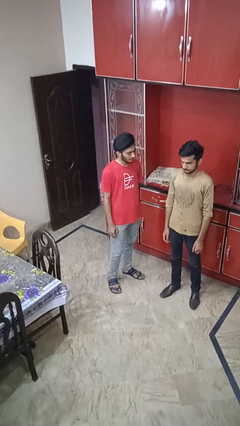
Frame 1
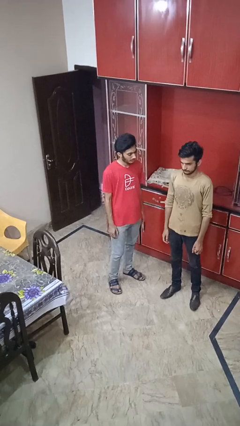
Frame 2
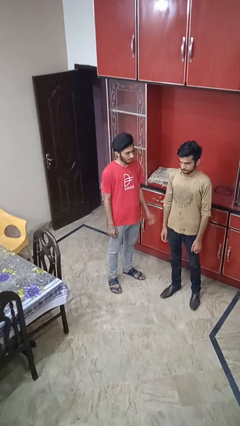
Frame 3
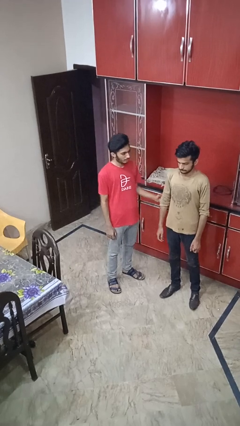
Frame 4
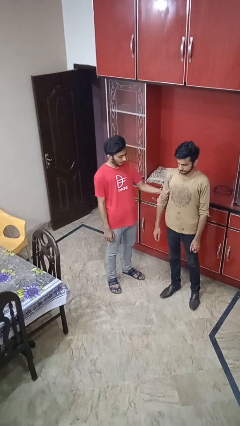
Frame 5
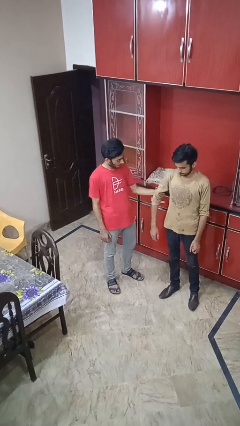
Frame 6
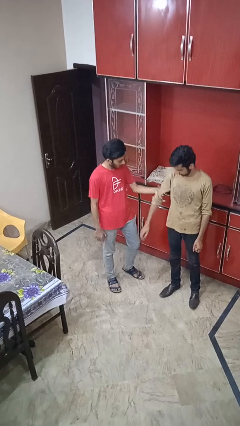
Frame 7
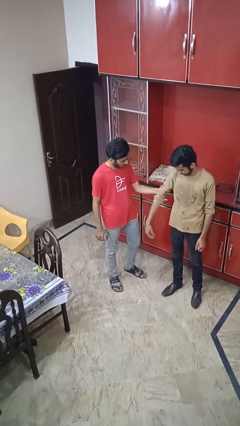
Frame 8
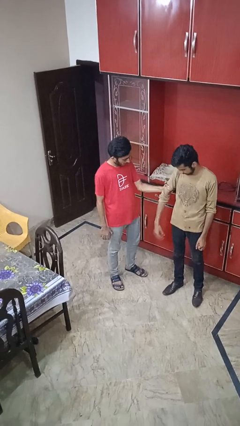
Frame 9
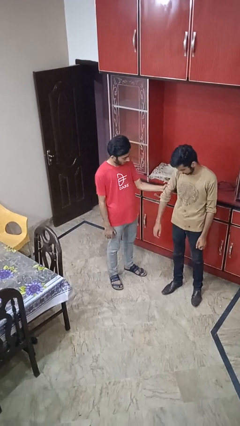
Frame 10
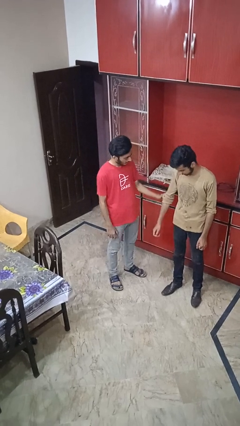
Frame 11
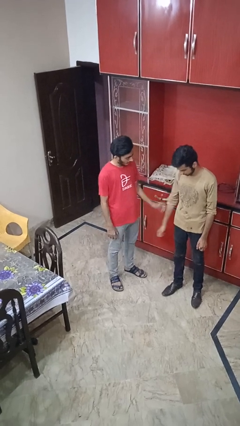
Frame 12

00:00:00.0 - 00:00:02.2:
person grabs person by bicep

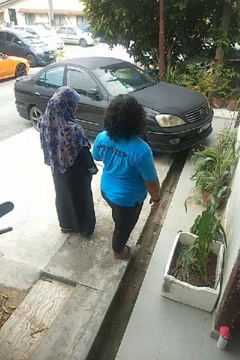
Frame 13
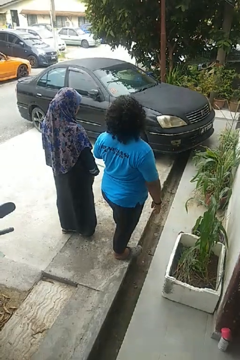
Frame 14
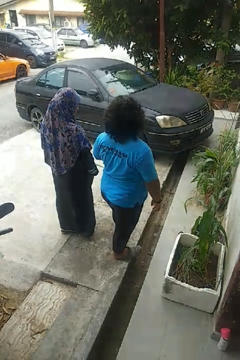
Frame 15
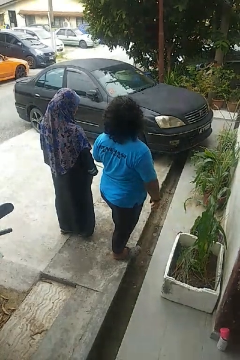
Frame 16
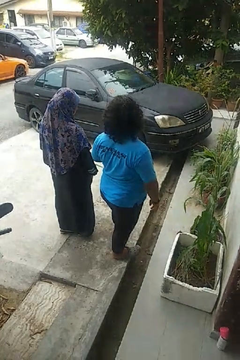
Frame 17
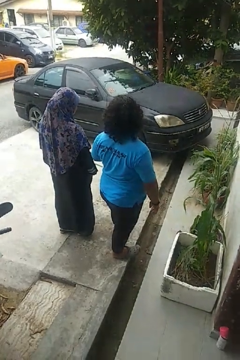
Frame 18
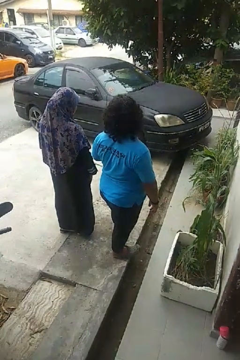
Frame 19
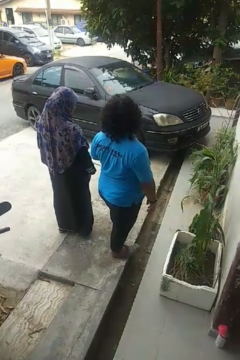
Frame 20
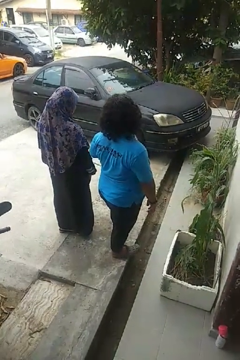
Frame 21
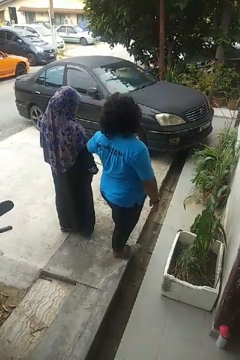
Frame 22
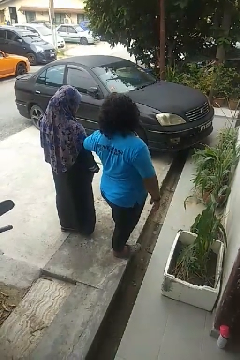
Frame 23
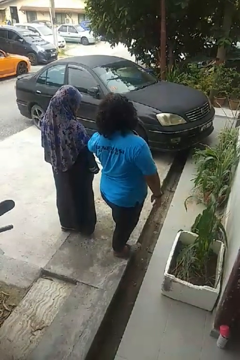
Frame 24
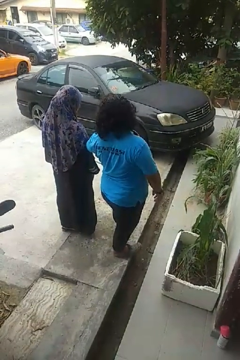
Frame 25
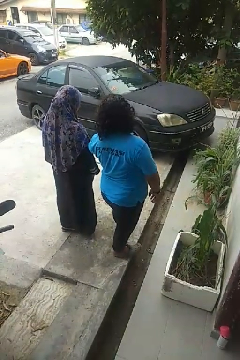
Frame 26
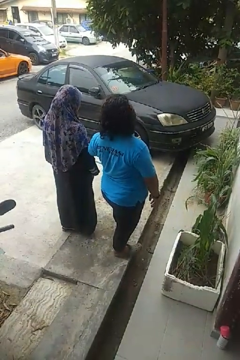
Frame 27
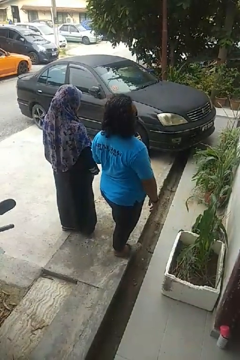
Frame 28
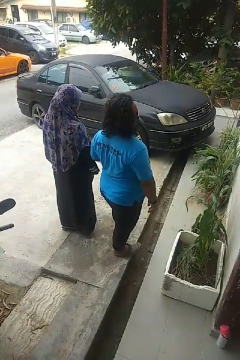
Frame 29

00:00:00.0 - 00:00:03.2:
person nudges person with elbow

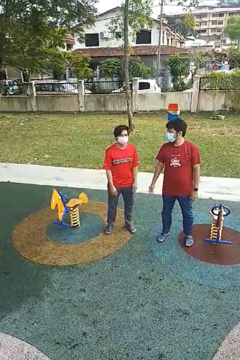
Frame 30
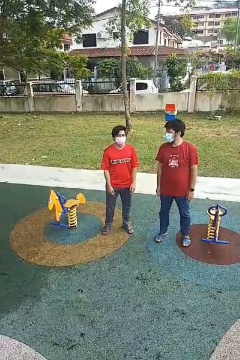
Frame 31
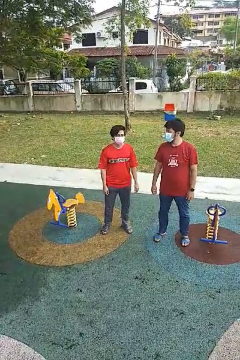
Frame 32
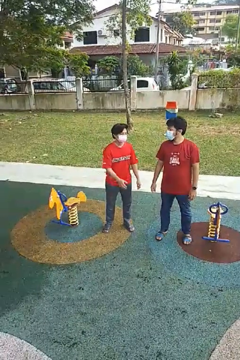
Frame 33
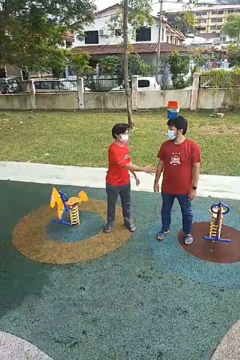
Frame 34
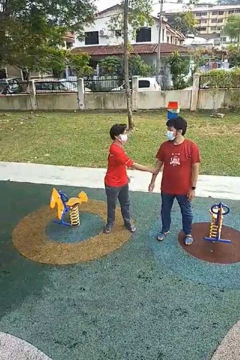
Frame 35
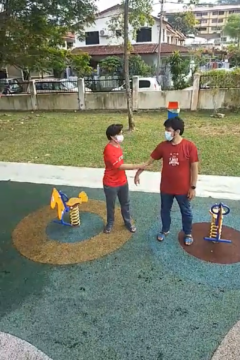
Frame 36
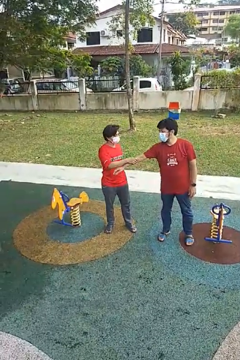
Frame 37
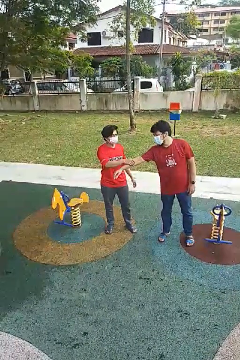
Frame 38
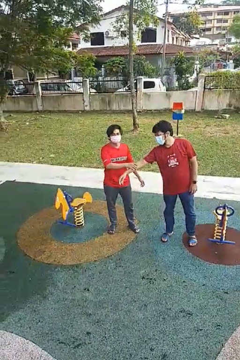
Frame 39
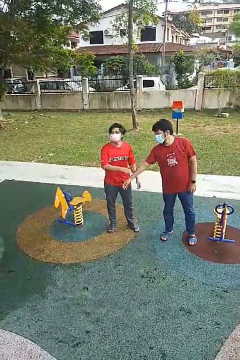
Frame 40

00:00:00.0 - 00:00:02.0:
person grabs person by forearm

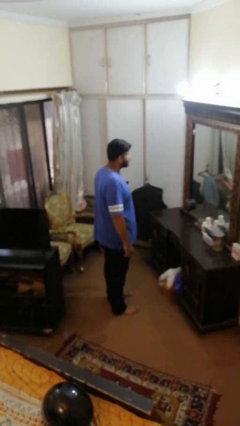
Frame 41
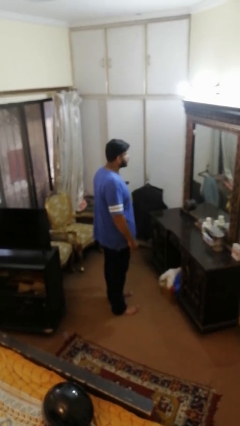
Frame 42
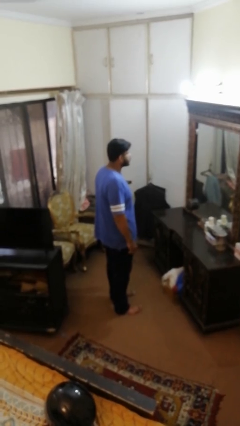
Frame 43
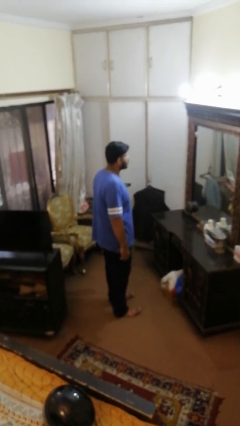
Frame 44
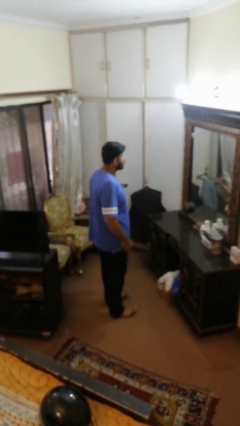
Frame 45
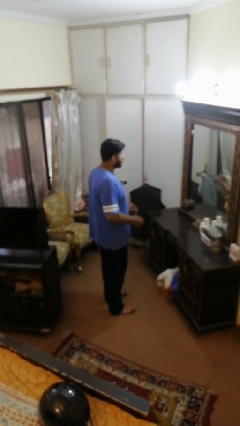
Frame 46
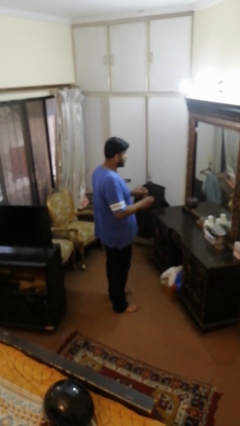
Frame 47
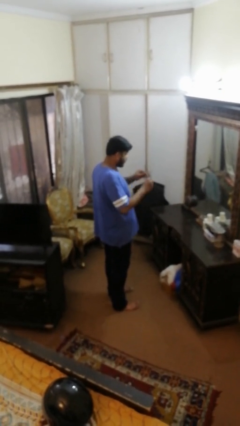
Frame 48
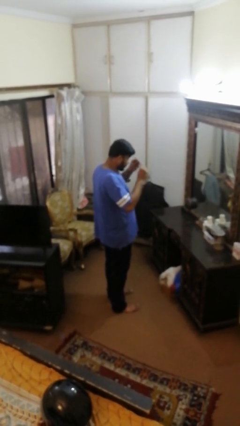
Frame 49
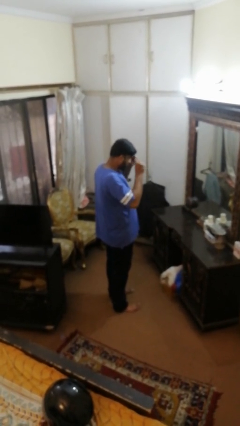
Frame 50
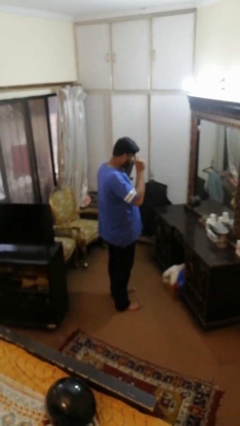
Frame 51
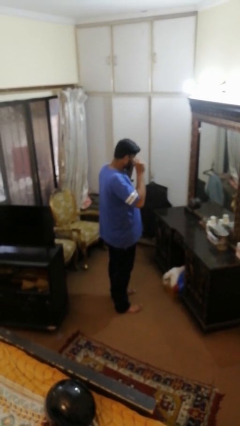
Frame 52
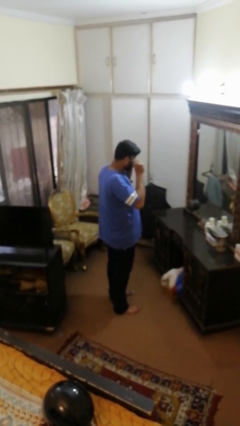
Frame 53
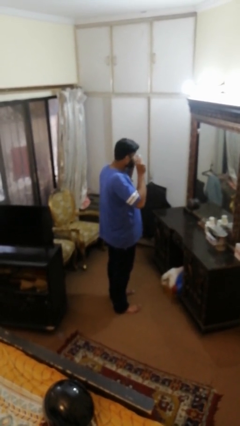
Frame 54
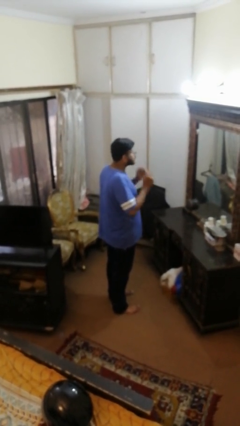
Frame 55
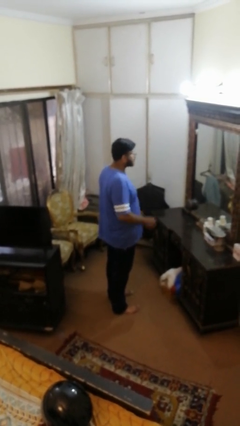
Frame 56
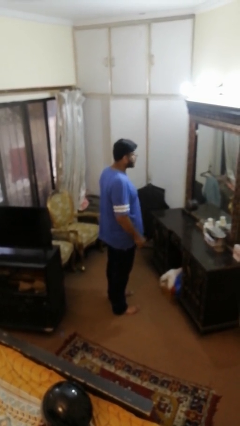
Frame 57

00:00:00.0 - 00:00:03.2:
person puts on glasses

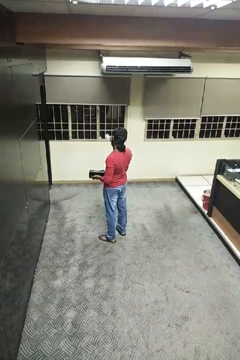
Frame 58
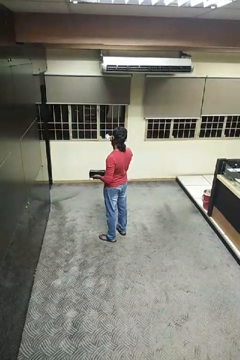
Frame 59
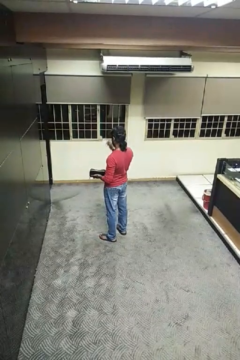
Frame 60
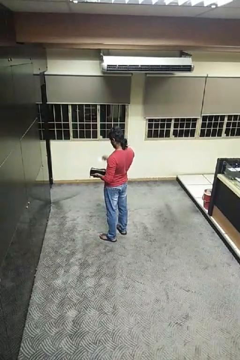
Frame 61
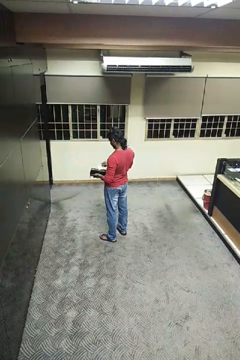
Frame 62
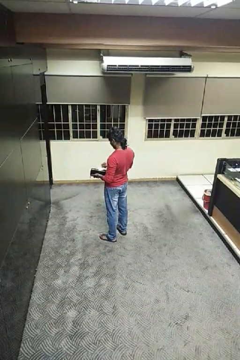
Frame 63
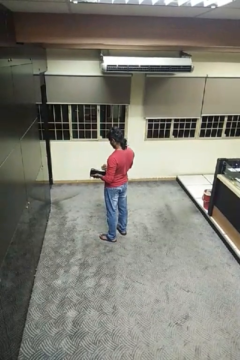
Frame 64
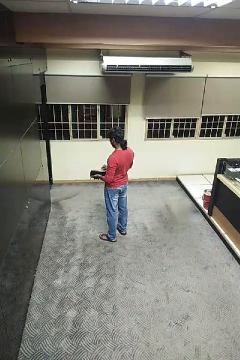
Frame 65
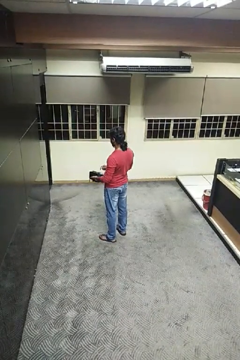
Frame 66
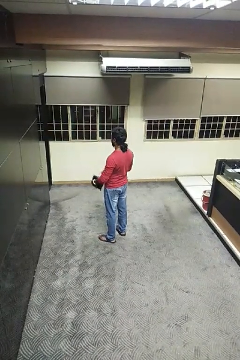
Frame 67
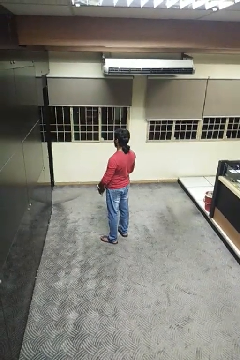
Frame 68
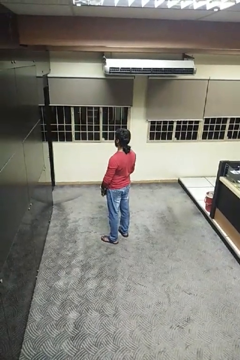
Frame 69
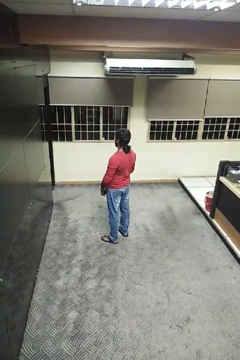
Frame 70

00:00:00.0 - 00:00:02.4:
person puts object into purse

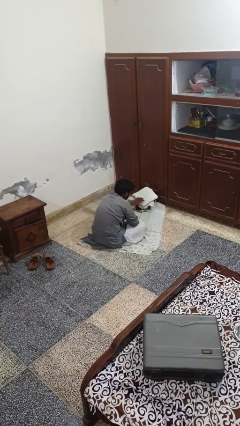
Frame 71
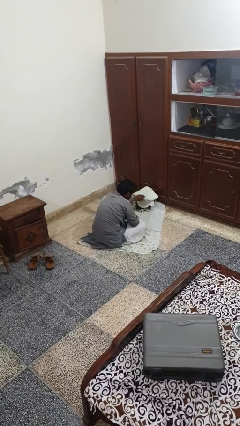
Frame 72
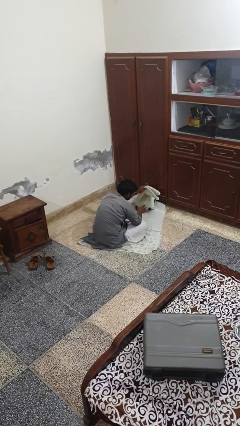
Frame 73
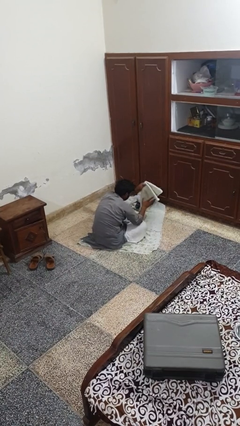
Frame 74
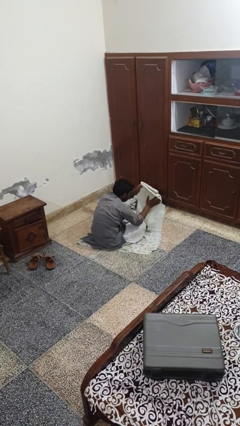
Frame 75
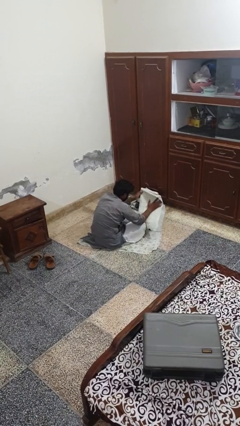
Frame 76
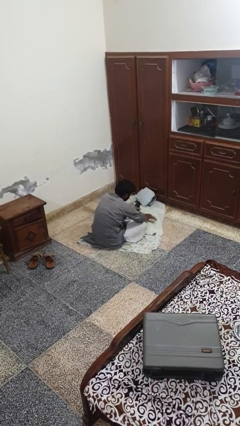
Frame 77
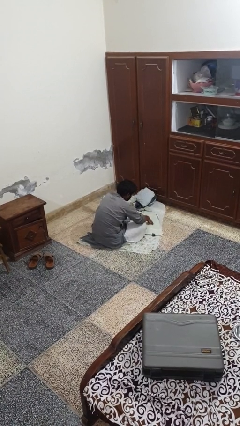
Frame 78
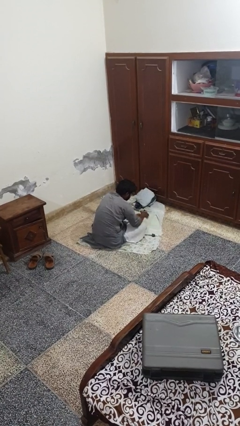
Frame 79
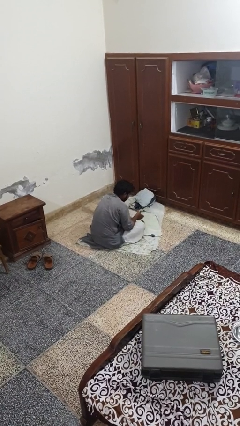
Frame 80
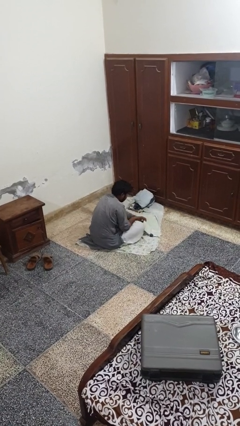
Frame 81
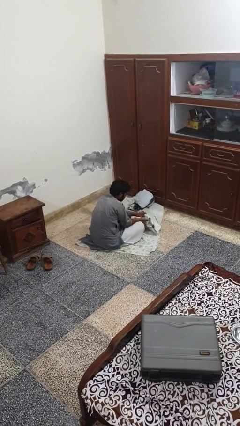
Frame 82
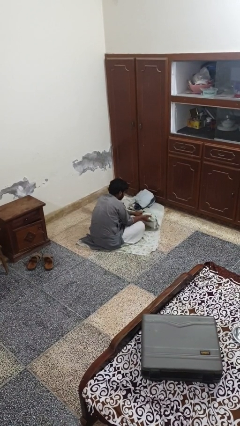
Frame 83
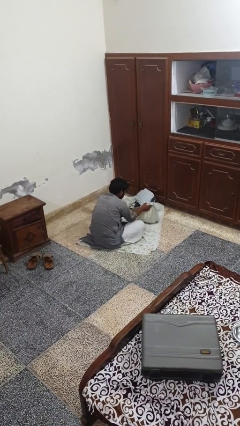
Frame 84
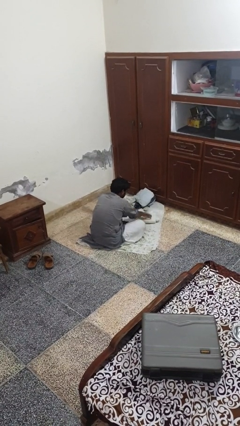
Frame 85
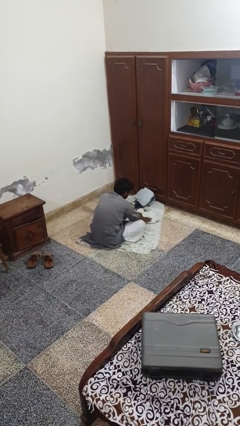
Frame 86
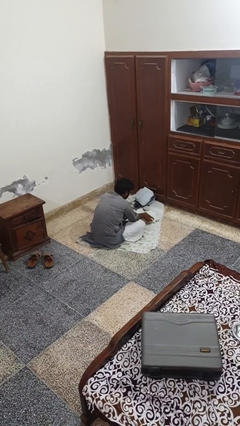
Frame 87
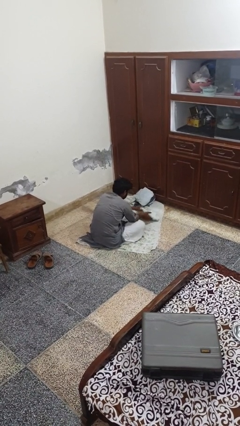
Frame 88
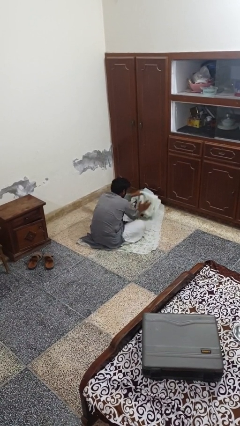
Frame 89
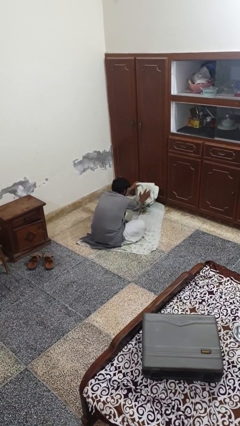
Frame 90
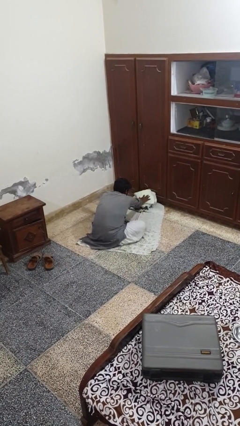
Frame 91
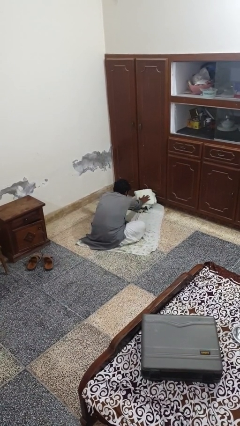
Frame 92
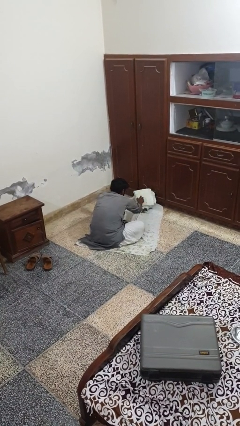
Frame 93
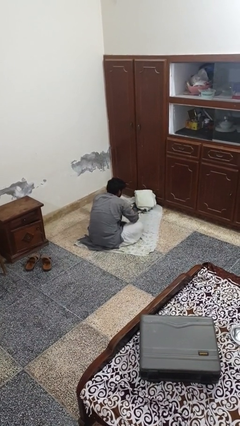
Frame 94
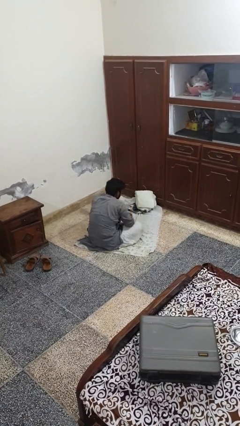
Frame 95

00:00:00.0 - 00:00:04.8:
person folds towel

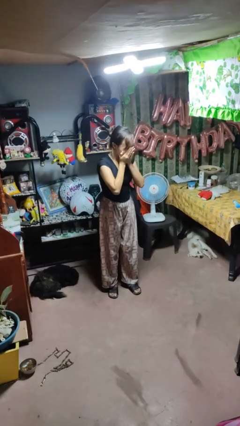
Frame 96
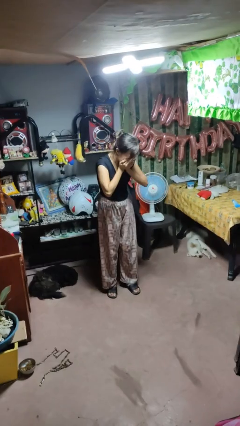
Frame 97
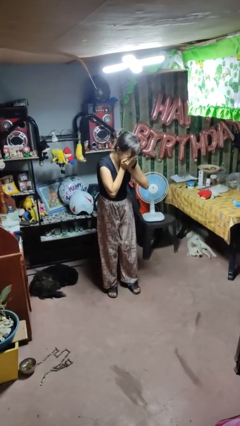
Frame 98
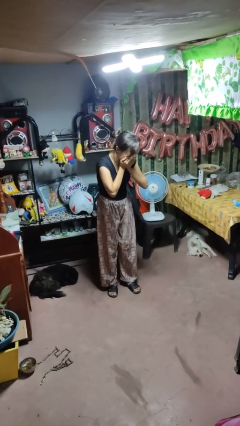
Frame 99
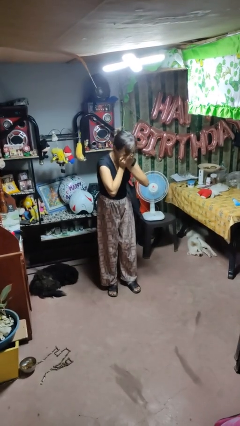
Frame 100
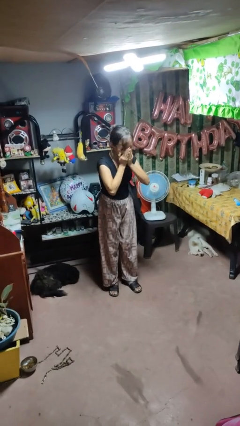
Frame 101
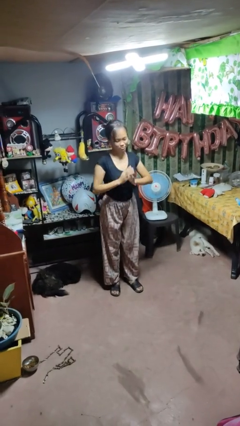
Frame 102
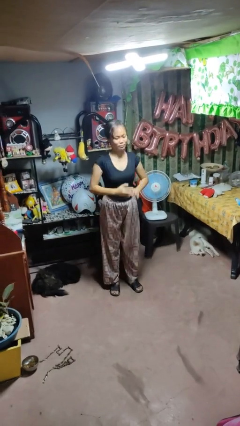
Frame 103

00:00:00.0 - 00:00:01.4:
person sneezes into hand

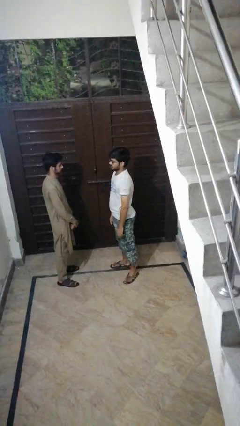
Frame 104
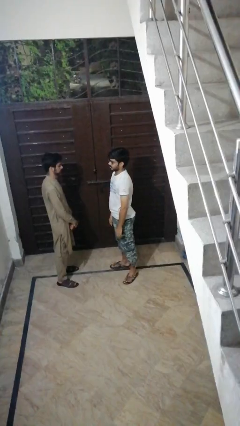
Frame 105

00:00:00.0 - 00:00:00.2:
person pounds shoulders of person
